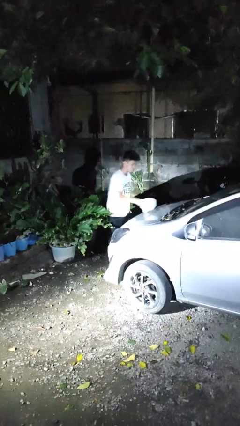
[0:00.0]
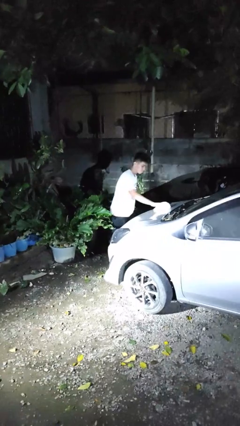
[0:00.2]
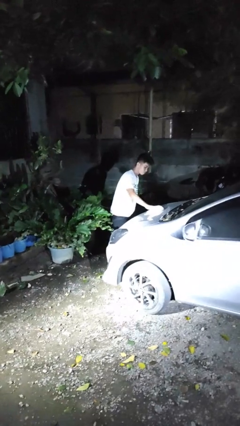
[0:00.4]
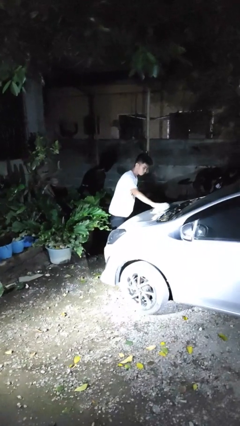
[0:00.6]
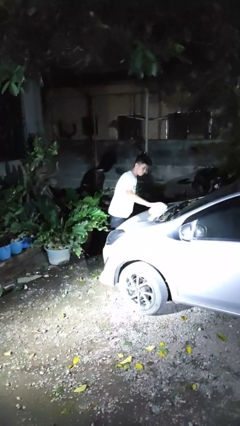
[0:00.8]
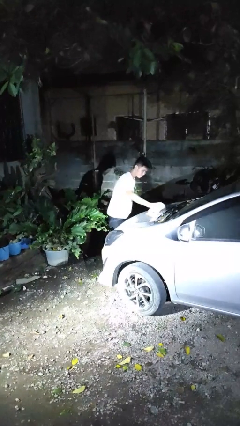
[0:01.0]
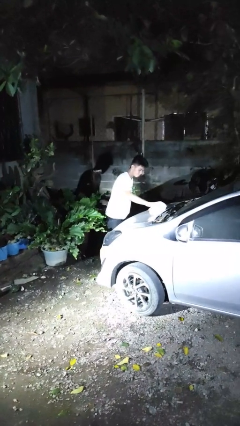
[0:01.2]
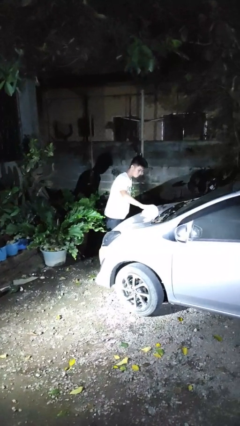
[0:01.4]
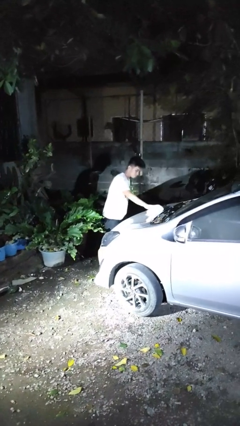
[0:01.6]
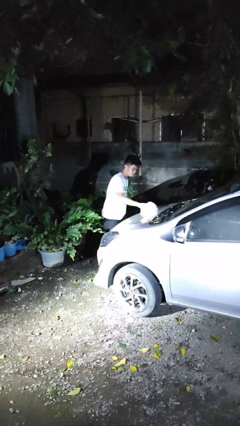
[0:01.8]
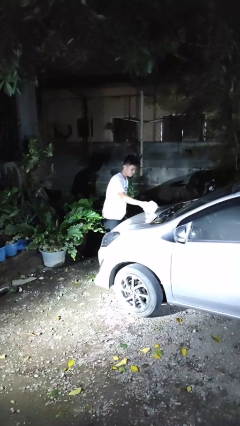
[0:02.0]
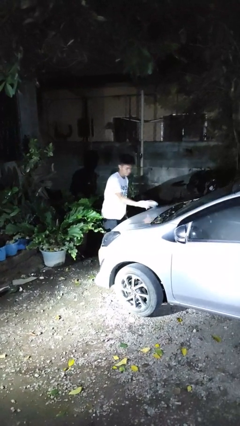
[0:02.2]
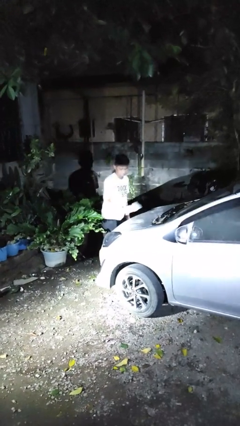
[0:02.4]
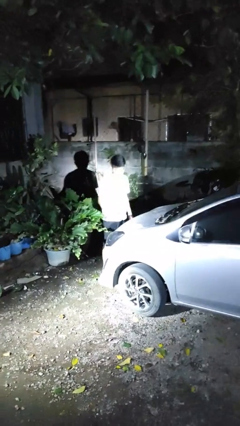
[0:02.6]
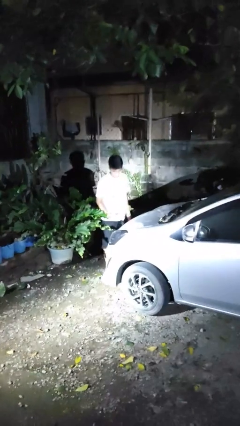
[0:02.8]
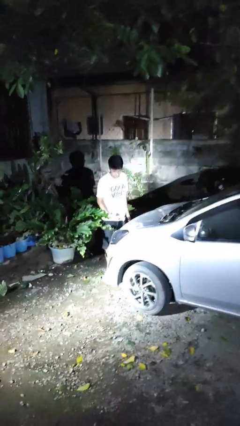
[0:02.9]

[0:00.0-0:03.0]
person polishes car with rag

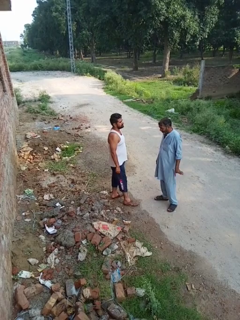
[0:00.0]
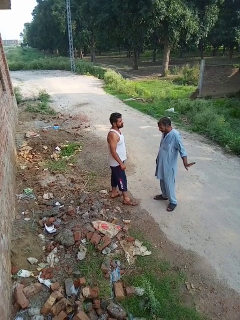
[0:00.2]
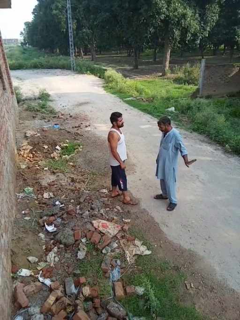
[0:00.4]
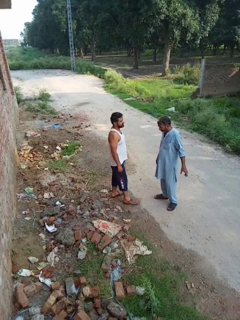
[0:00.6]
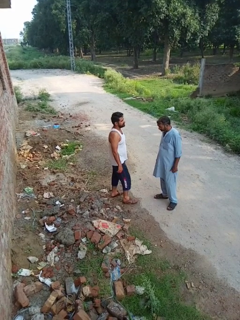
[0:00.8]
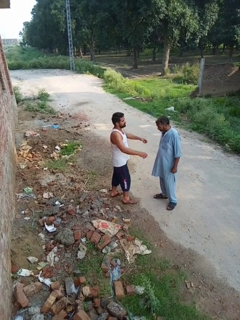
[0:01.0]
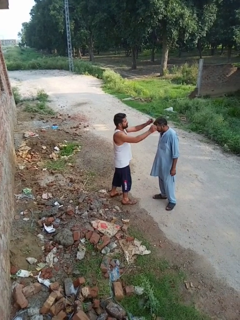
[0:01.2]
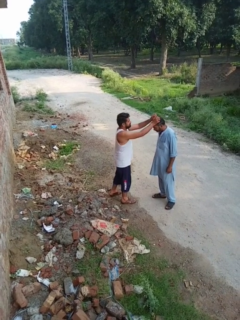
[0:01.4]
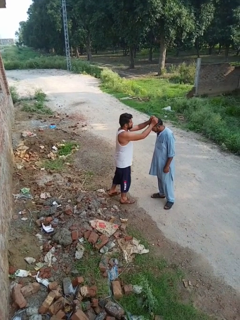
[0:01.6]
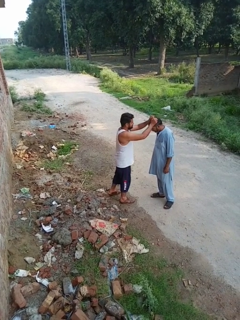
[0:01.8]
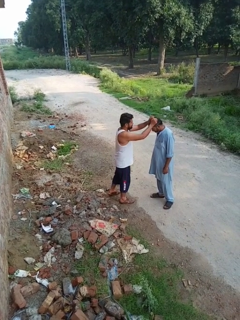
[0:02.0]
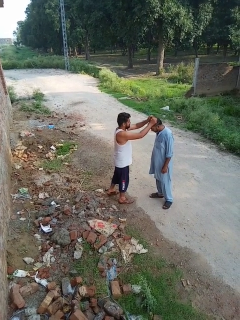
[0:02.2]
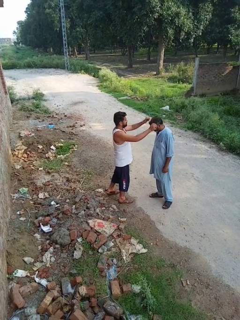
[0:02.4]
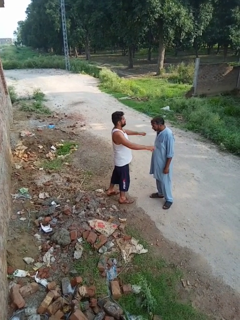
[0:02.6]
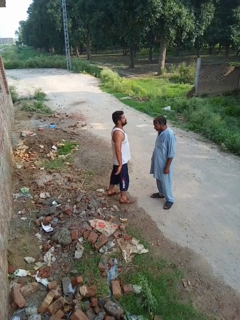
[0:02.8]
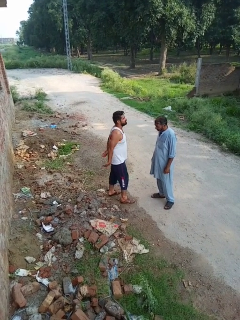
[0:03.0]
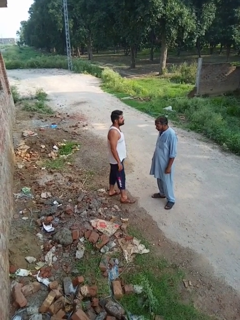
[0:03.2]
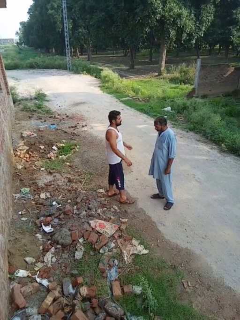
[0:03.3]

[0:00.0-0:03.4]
person grabs person by hair

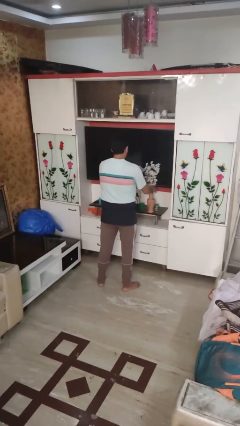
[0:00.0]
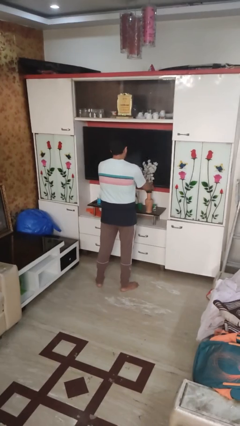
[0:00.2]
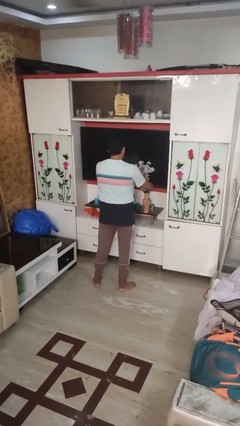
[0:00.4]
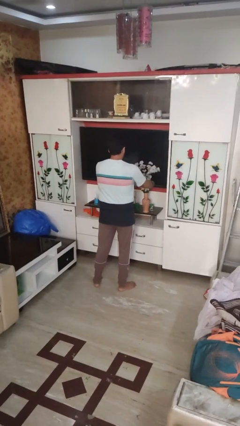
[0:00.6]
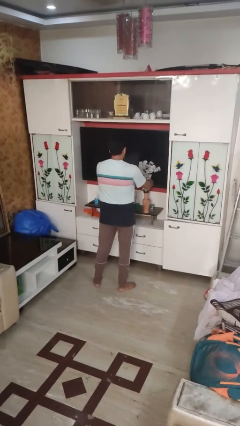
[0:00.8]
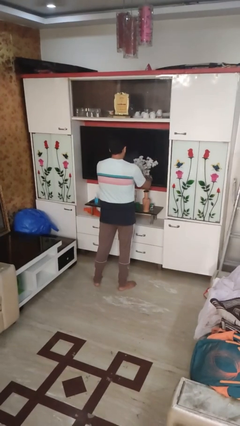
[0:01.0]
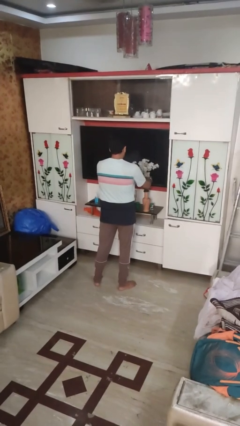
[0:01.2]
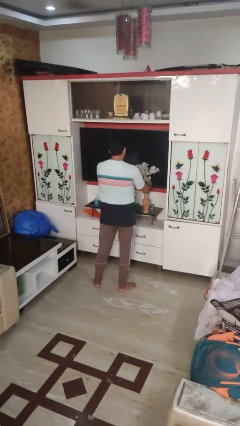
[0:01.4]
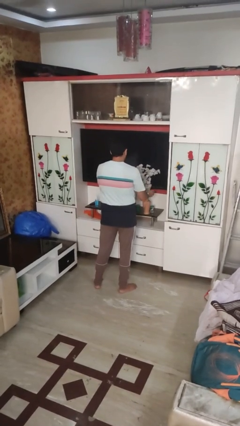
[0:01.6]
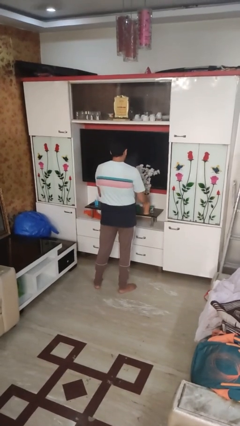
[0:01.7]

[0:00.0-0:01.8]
person arranges flowers in vase

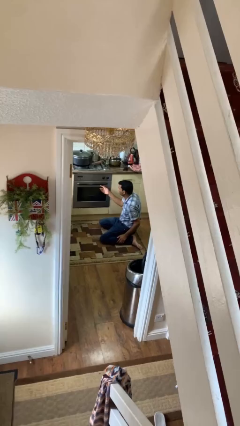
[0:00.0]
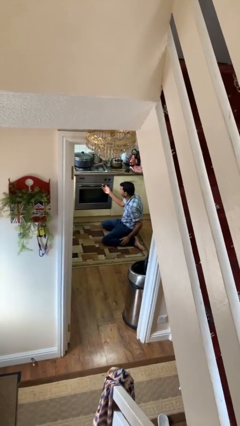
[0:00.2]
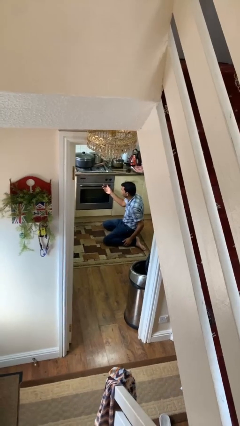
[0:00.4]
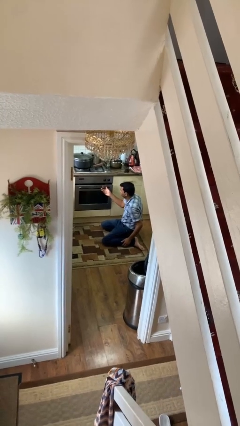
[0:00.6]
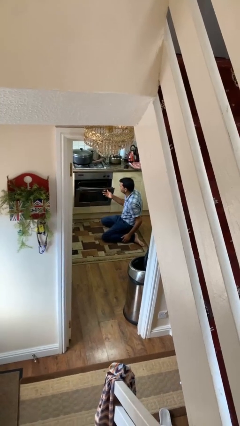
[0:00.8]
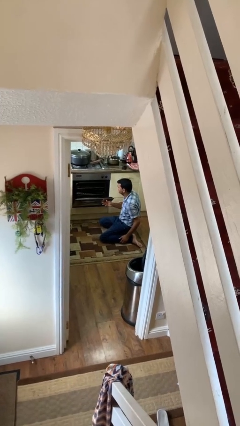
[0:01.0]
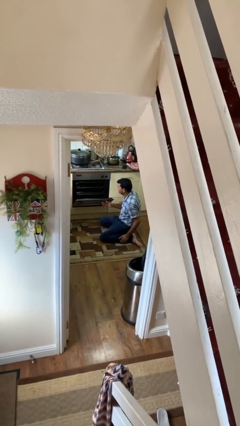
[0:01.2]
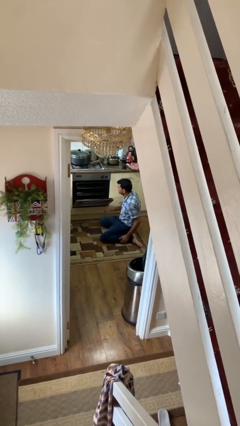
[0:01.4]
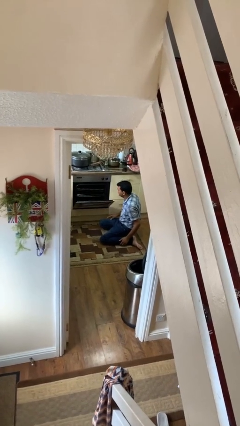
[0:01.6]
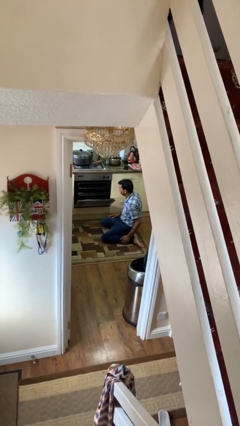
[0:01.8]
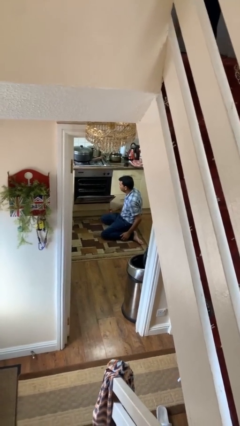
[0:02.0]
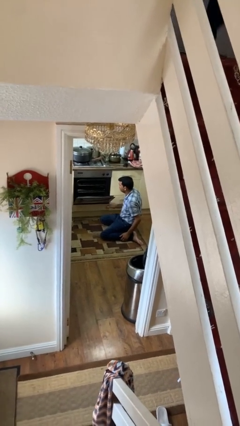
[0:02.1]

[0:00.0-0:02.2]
person opens oven door

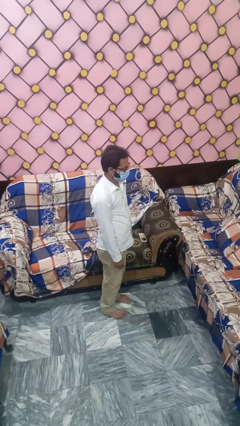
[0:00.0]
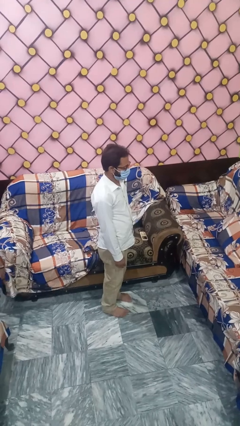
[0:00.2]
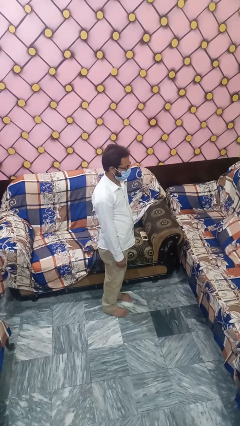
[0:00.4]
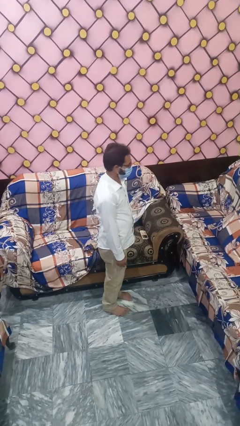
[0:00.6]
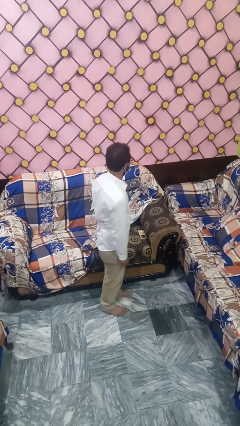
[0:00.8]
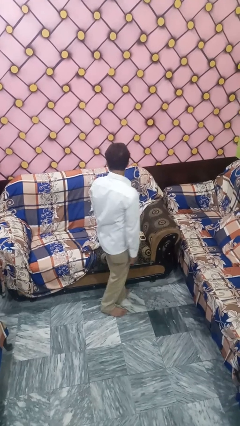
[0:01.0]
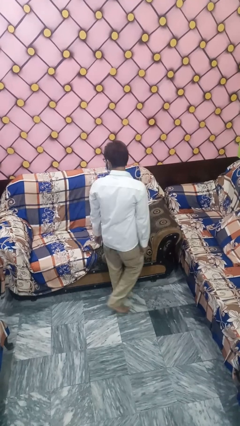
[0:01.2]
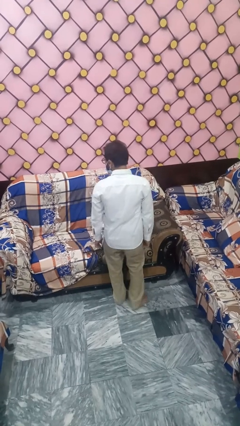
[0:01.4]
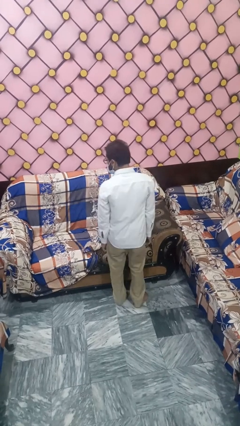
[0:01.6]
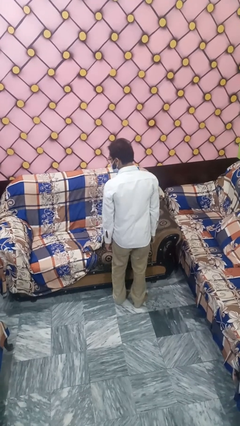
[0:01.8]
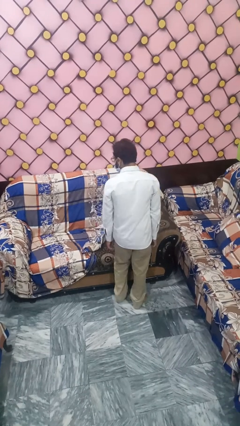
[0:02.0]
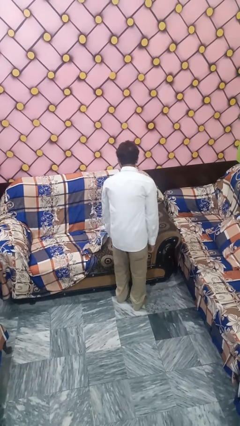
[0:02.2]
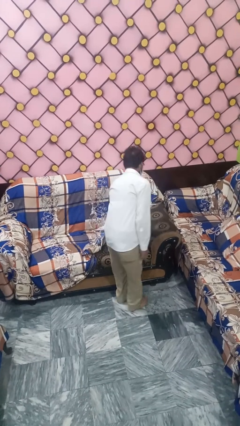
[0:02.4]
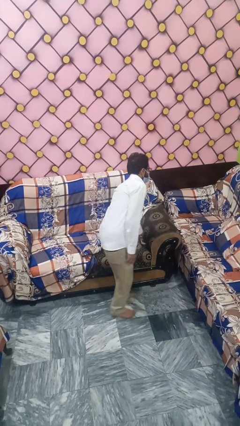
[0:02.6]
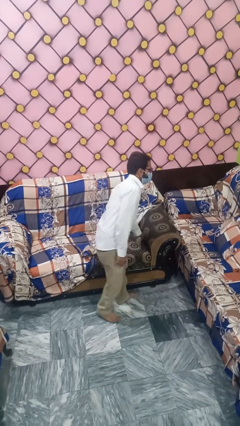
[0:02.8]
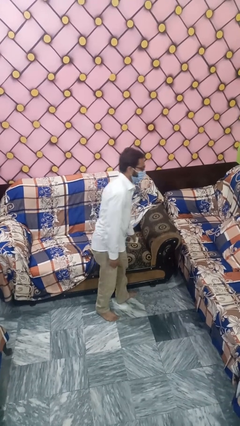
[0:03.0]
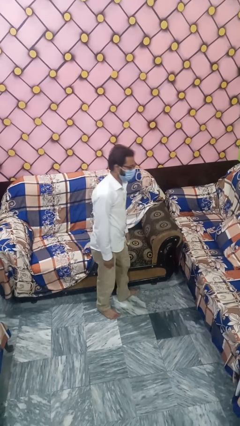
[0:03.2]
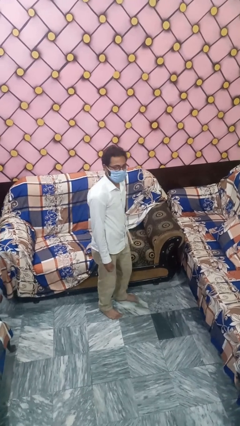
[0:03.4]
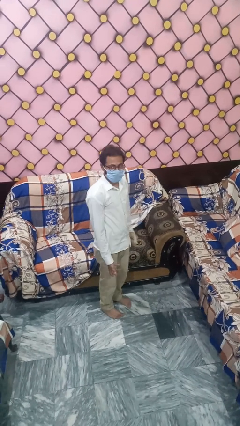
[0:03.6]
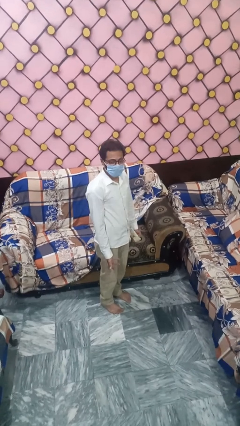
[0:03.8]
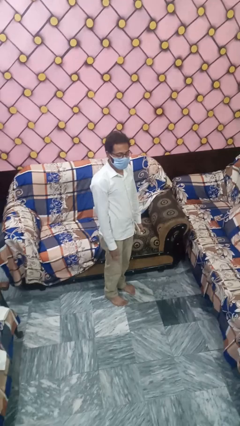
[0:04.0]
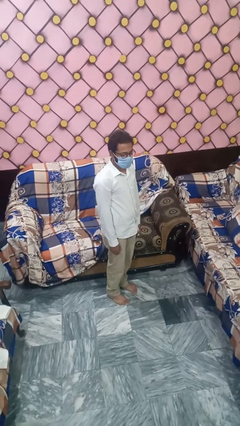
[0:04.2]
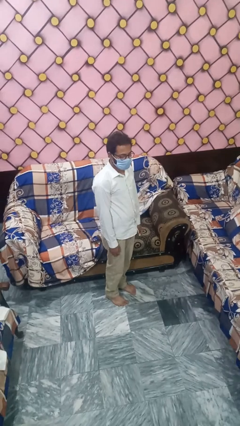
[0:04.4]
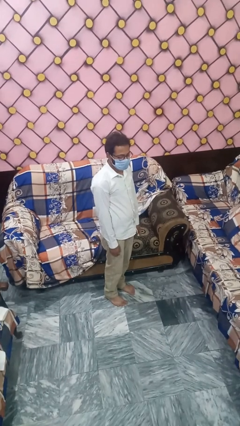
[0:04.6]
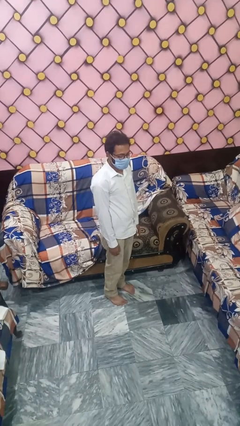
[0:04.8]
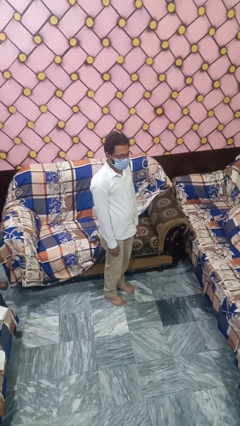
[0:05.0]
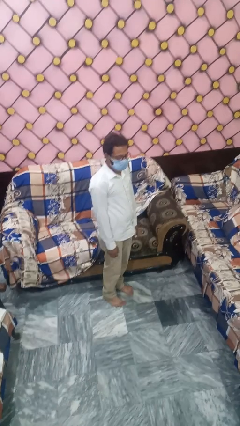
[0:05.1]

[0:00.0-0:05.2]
person searches under couch

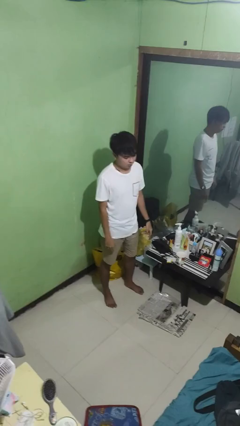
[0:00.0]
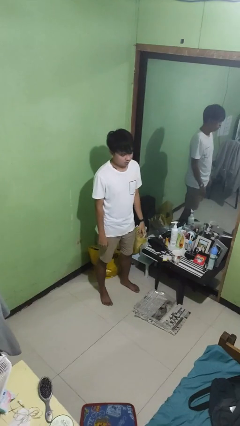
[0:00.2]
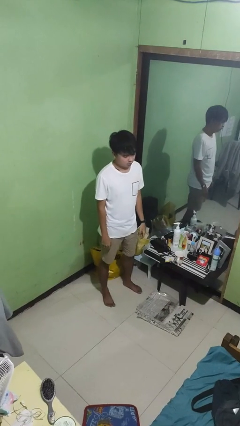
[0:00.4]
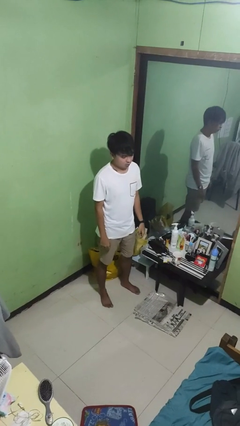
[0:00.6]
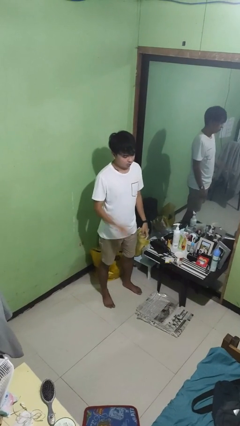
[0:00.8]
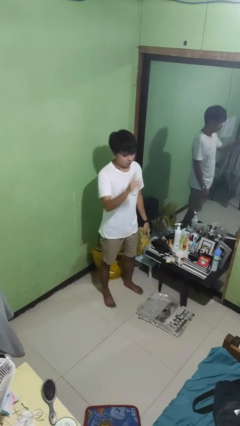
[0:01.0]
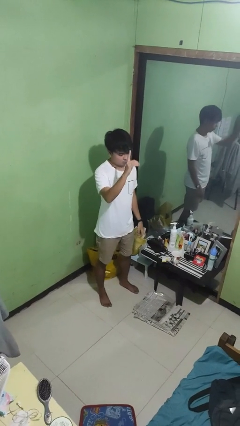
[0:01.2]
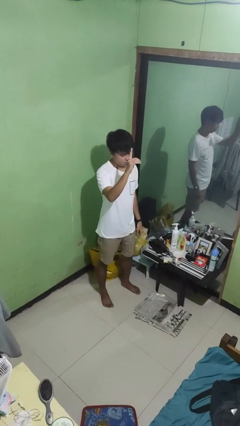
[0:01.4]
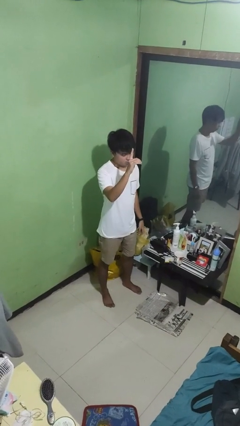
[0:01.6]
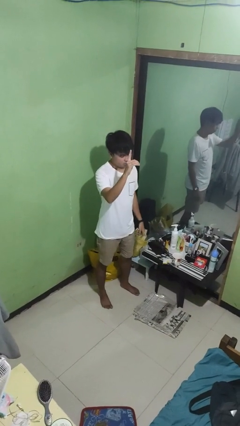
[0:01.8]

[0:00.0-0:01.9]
person gestures number one

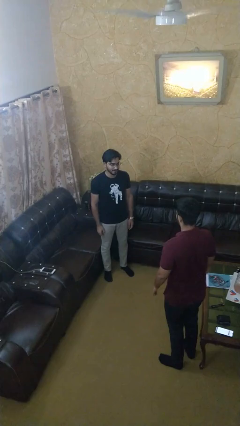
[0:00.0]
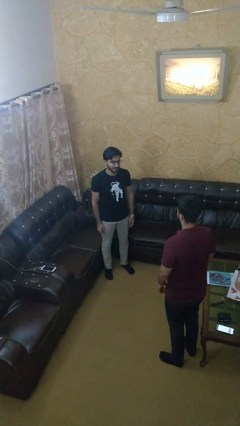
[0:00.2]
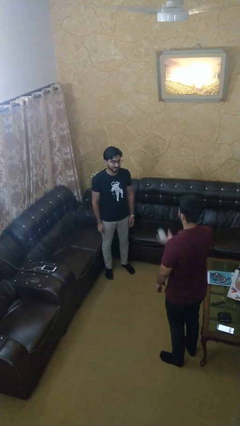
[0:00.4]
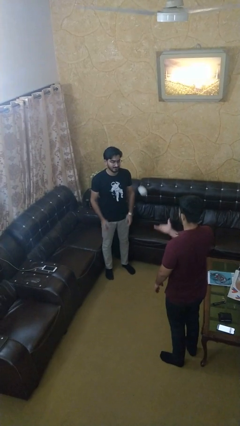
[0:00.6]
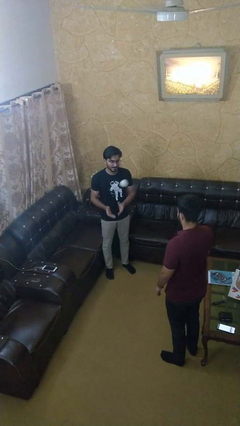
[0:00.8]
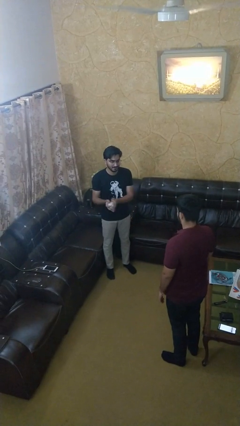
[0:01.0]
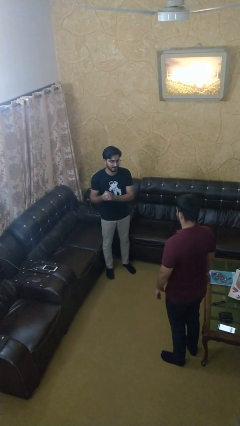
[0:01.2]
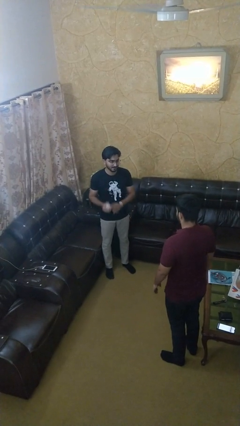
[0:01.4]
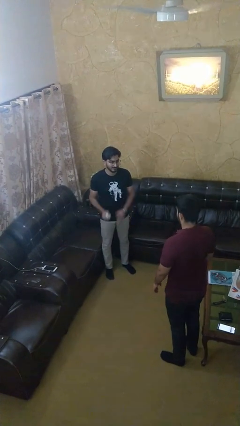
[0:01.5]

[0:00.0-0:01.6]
person catches object from person
